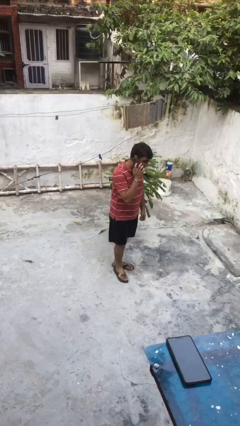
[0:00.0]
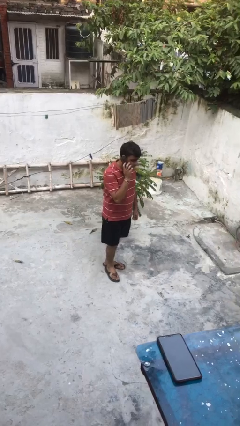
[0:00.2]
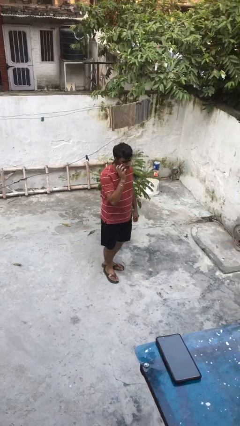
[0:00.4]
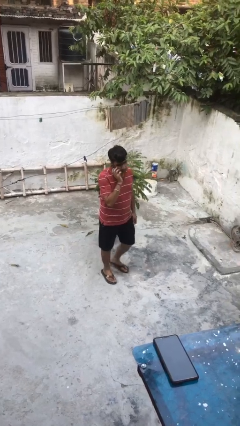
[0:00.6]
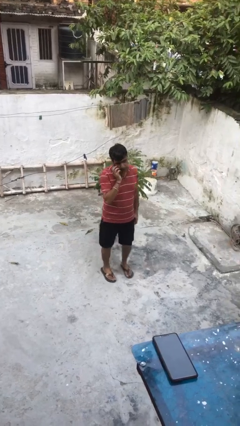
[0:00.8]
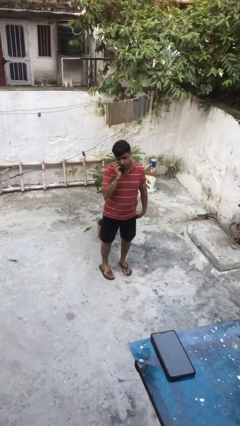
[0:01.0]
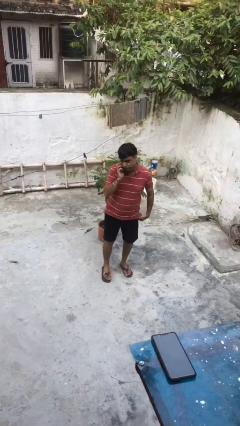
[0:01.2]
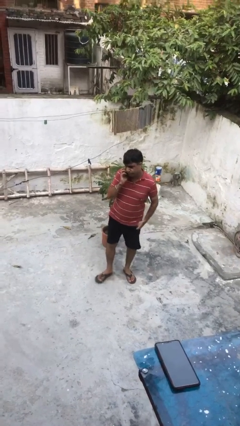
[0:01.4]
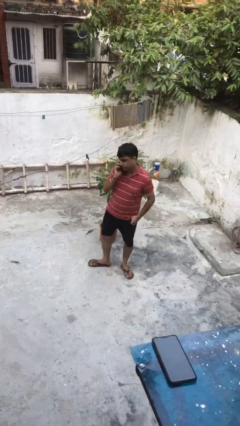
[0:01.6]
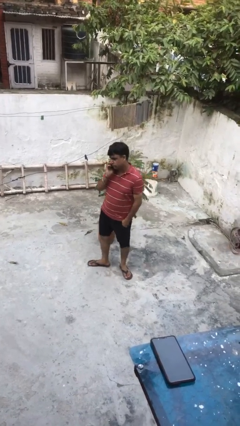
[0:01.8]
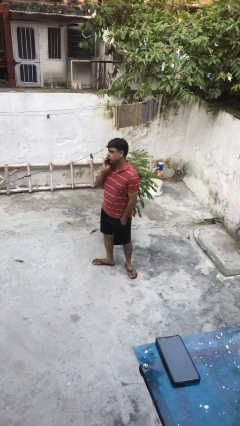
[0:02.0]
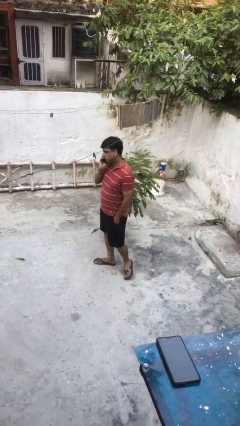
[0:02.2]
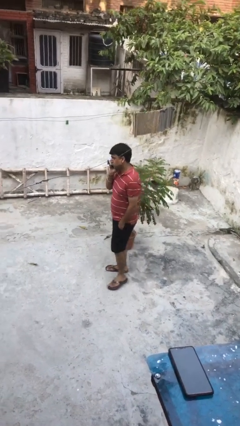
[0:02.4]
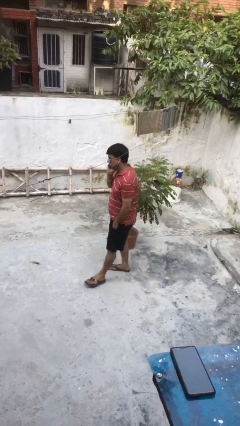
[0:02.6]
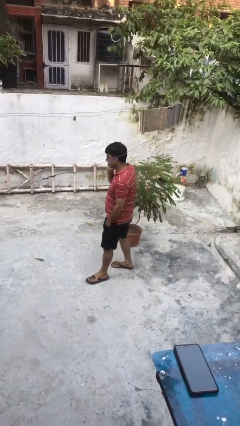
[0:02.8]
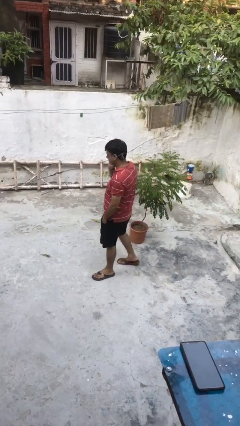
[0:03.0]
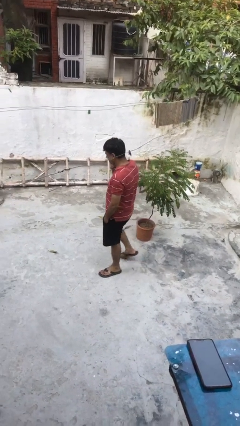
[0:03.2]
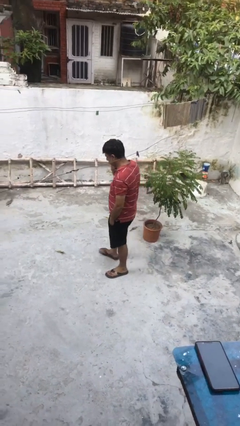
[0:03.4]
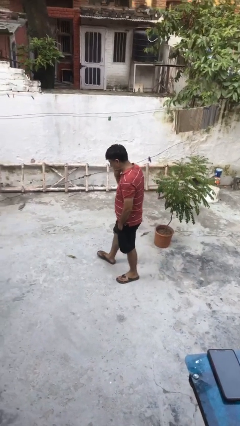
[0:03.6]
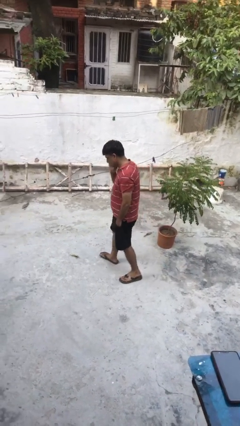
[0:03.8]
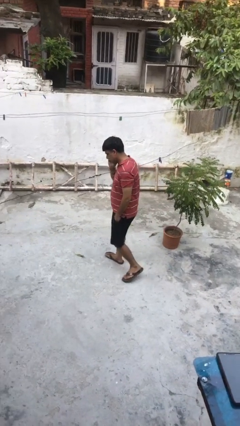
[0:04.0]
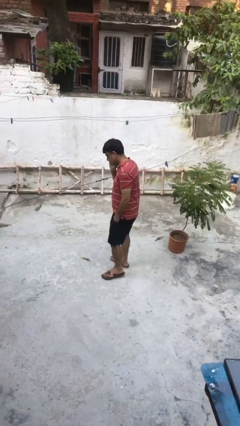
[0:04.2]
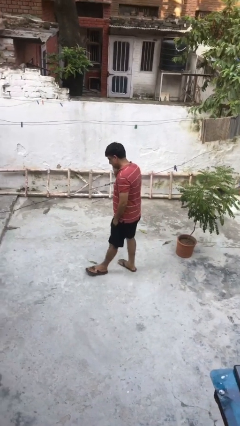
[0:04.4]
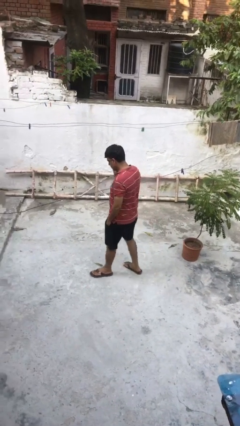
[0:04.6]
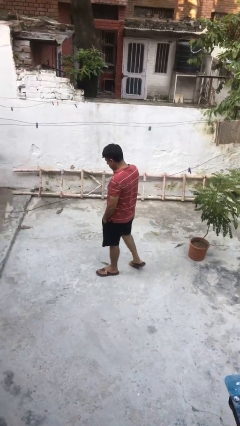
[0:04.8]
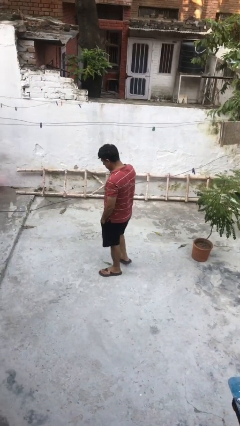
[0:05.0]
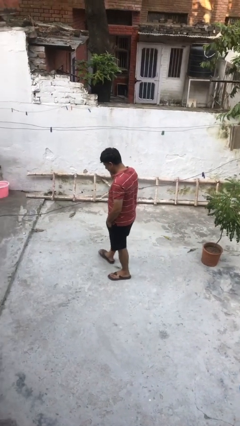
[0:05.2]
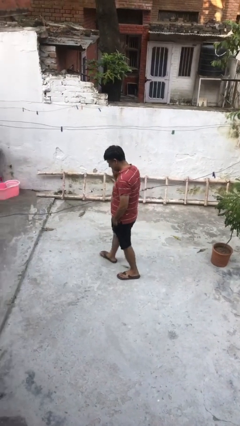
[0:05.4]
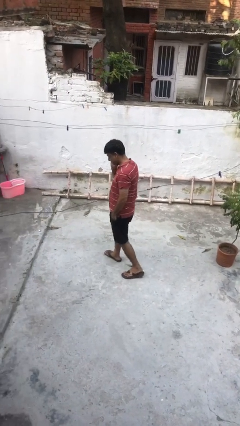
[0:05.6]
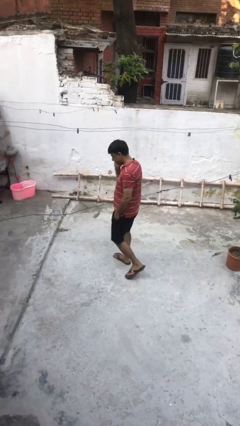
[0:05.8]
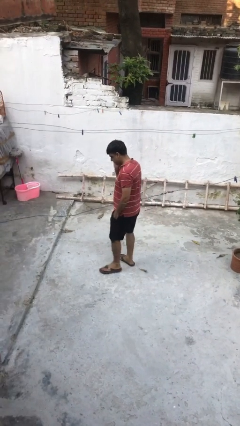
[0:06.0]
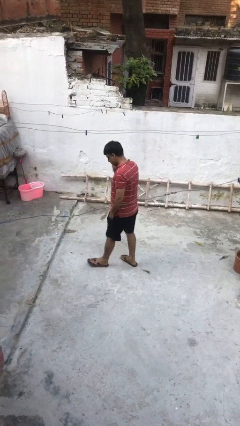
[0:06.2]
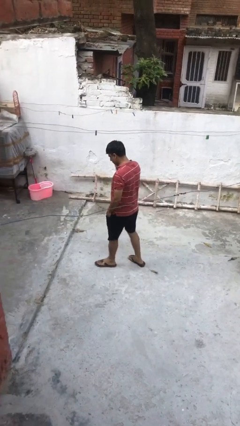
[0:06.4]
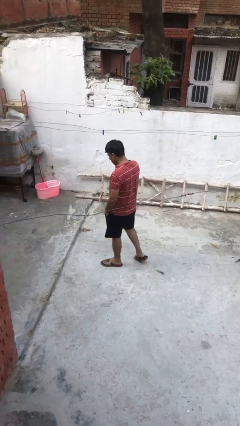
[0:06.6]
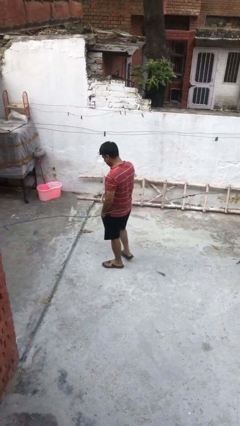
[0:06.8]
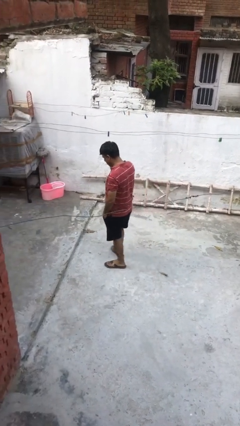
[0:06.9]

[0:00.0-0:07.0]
person talks on phone

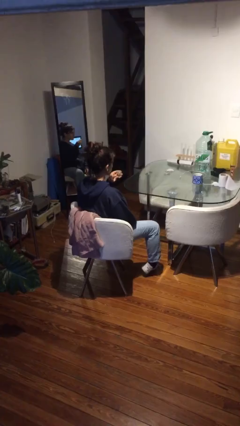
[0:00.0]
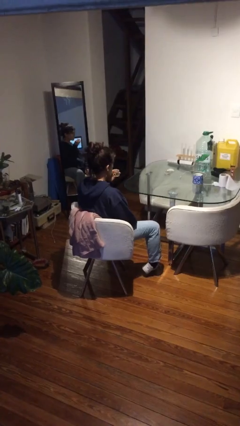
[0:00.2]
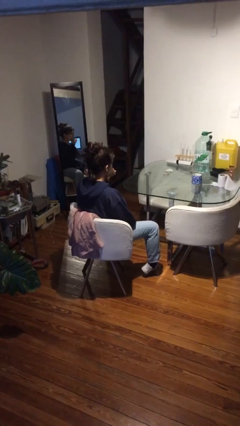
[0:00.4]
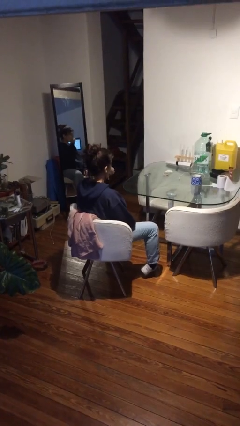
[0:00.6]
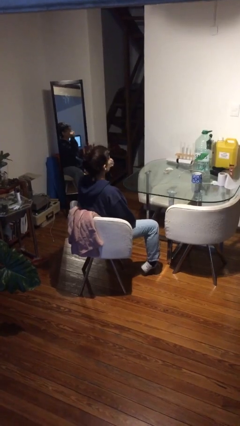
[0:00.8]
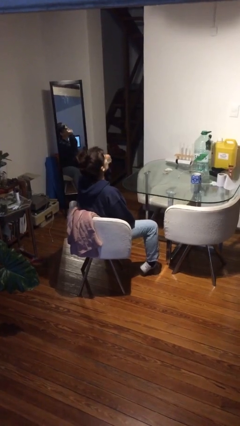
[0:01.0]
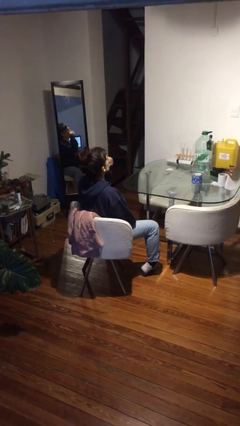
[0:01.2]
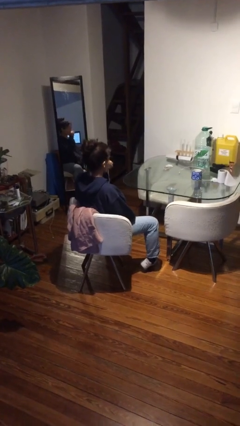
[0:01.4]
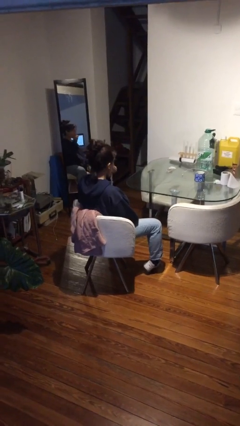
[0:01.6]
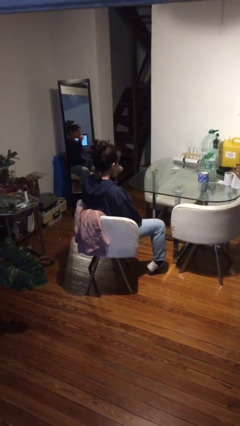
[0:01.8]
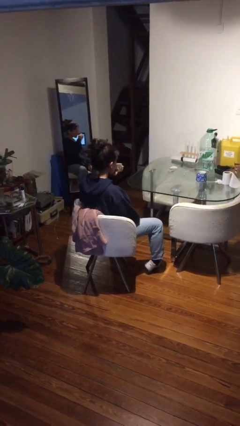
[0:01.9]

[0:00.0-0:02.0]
person drinks from shotglass

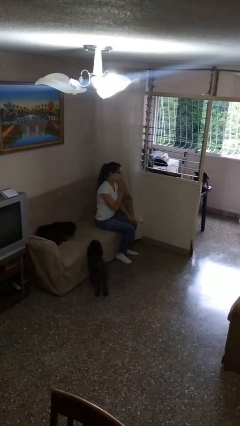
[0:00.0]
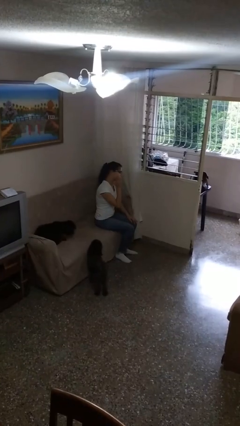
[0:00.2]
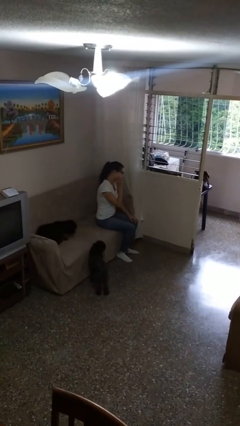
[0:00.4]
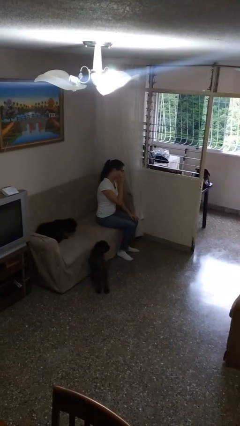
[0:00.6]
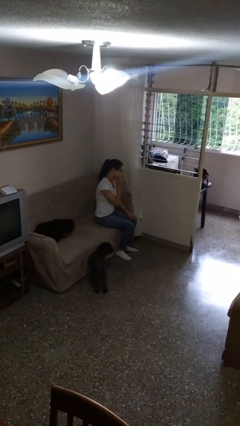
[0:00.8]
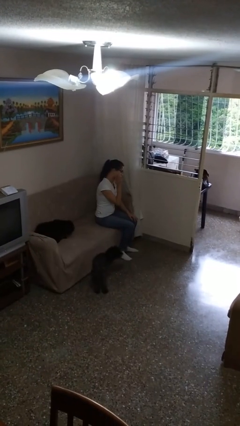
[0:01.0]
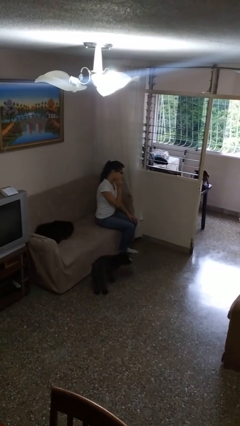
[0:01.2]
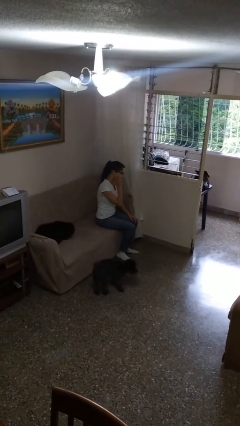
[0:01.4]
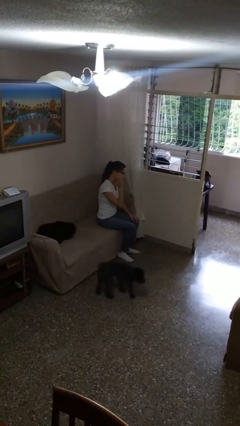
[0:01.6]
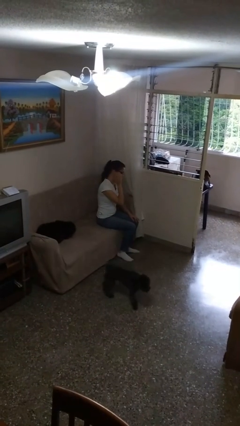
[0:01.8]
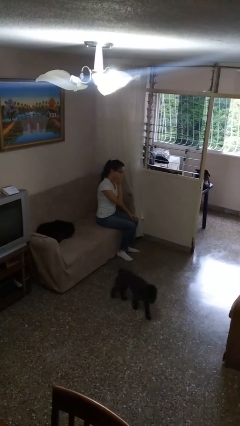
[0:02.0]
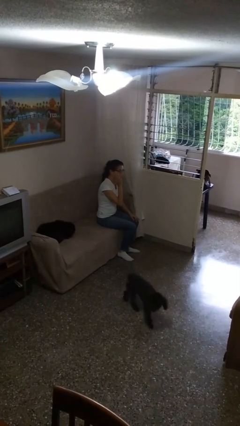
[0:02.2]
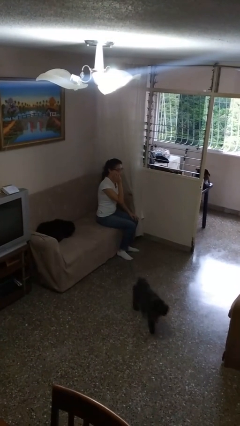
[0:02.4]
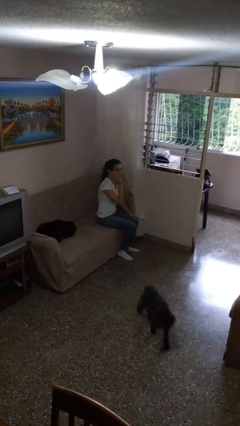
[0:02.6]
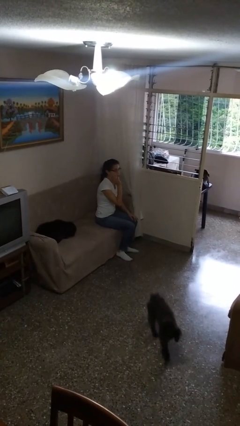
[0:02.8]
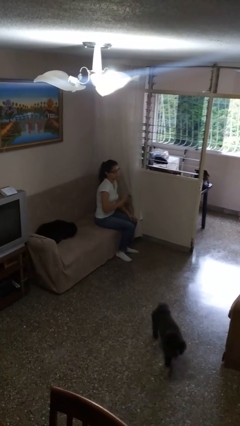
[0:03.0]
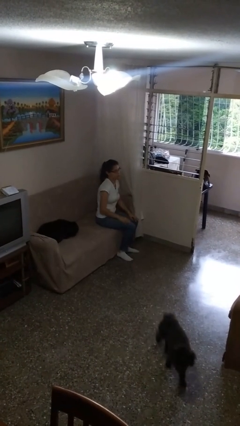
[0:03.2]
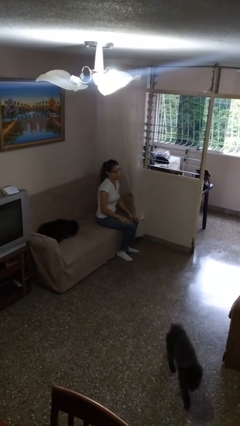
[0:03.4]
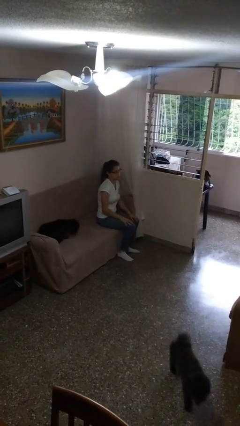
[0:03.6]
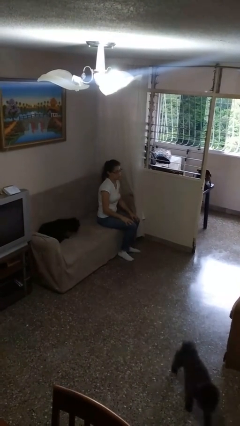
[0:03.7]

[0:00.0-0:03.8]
person scratches face

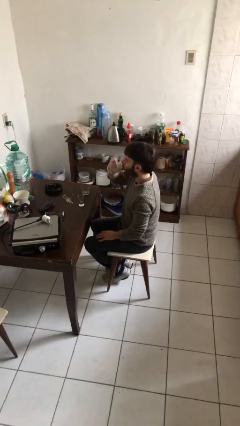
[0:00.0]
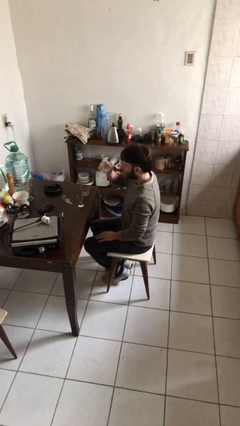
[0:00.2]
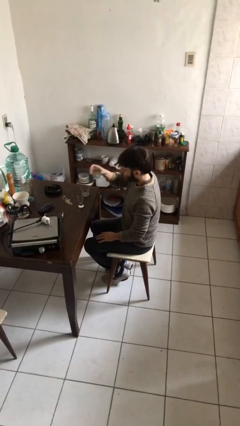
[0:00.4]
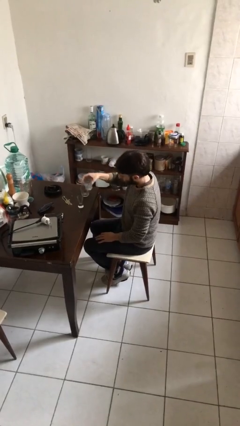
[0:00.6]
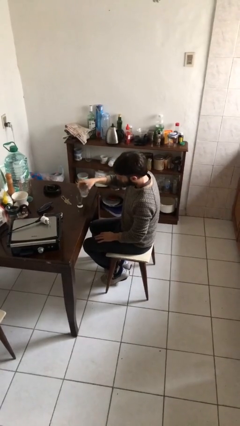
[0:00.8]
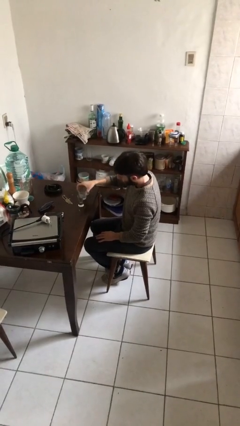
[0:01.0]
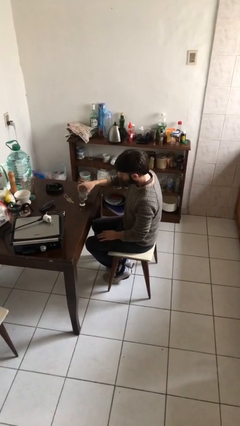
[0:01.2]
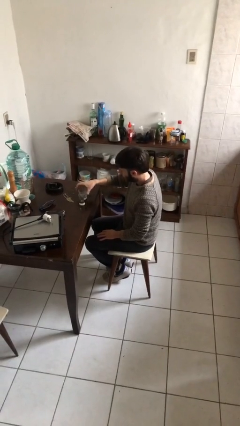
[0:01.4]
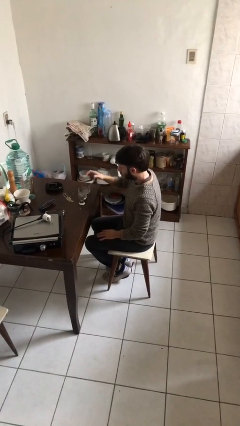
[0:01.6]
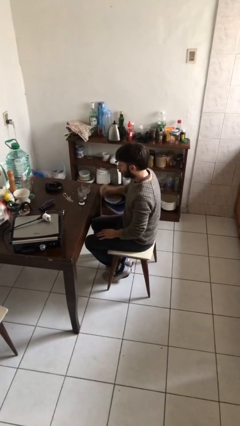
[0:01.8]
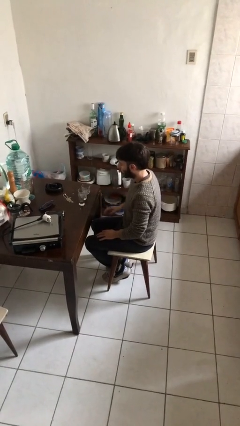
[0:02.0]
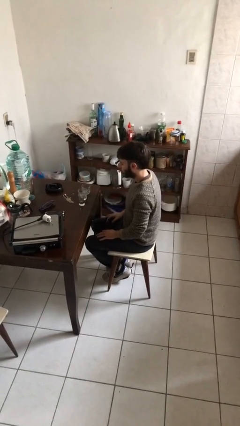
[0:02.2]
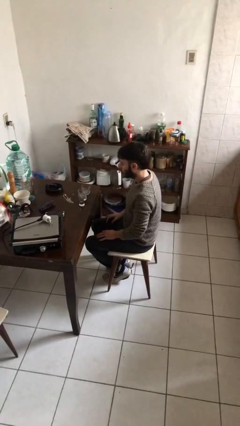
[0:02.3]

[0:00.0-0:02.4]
person puts down object on table

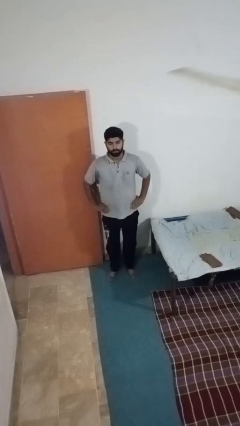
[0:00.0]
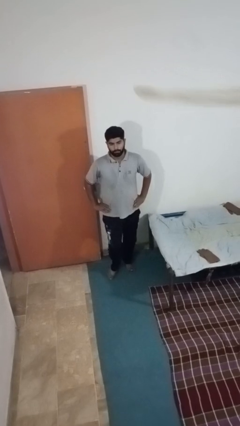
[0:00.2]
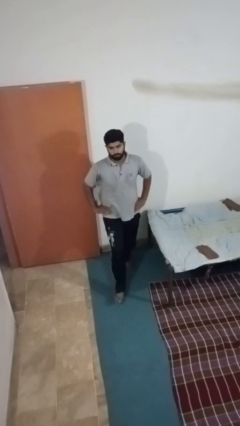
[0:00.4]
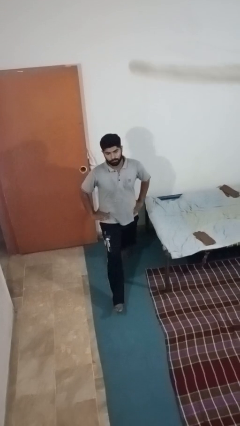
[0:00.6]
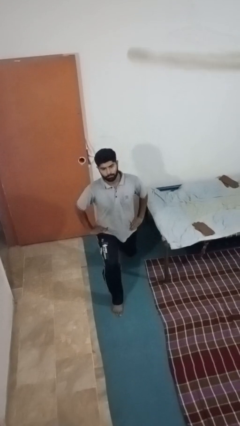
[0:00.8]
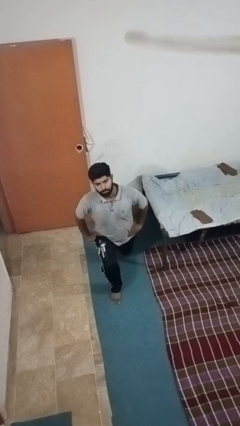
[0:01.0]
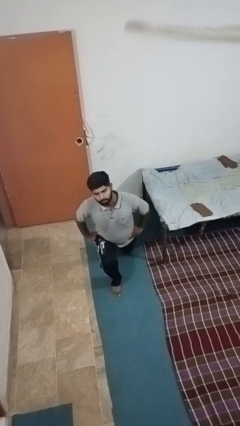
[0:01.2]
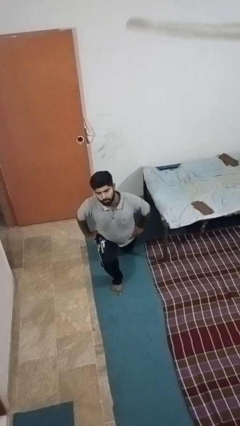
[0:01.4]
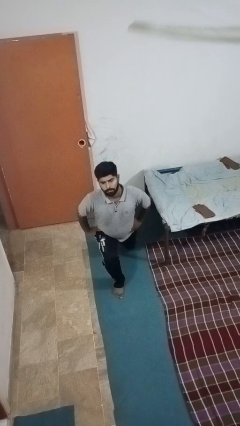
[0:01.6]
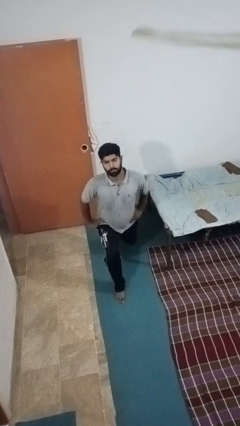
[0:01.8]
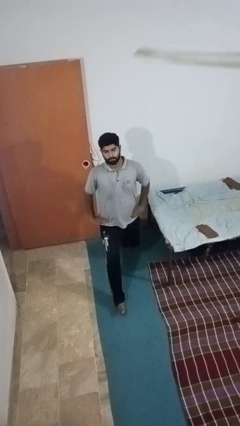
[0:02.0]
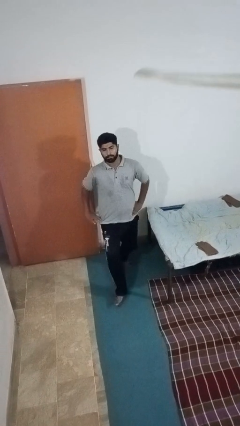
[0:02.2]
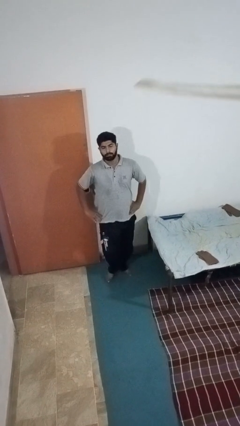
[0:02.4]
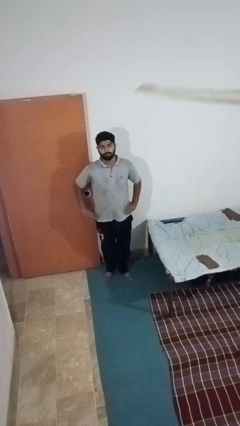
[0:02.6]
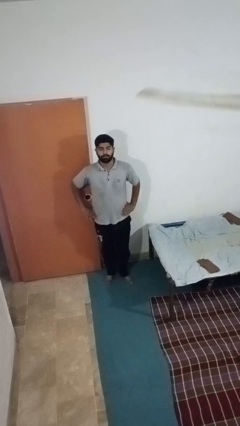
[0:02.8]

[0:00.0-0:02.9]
person exercises with lunges
